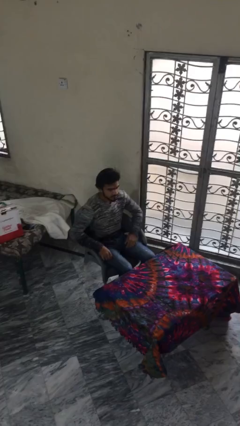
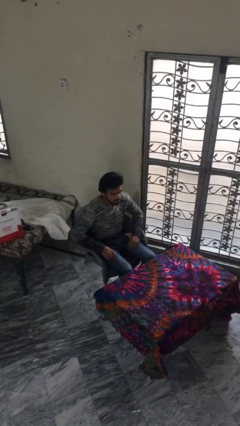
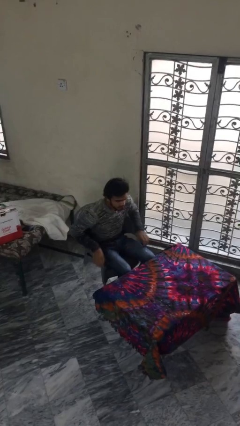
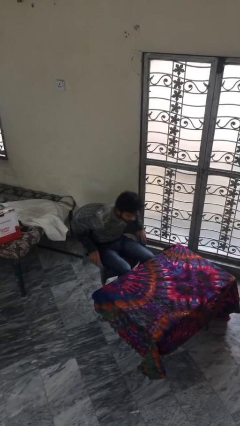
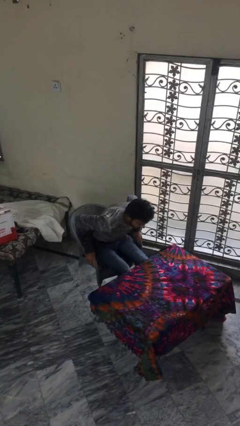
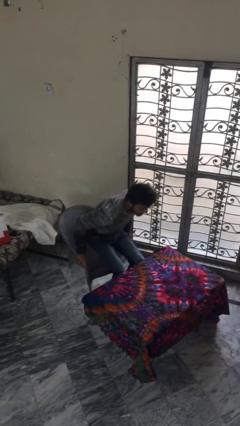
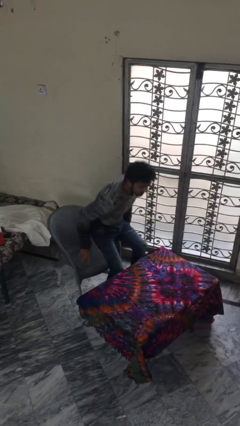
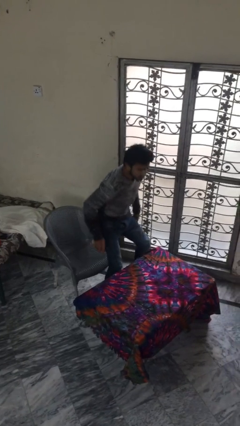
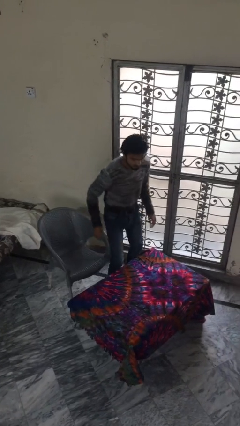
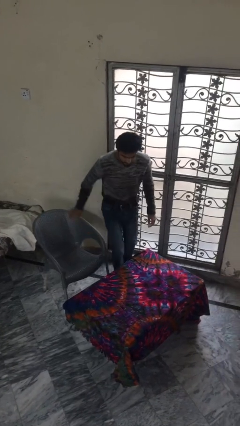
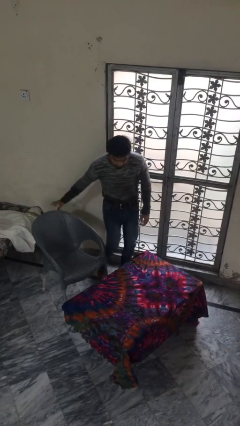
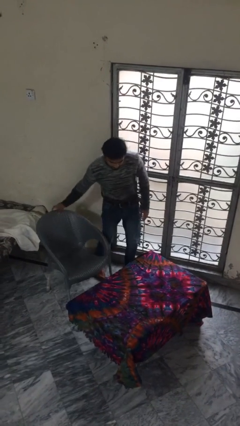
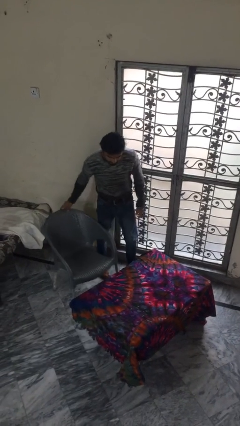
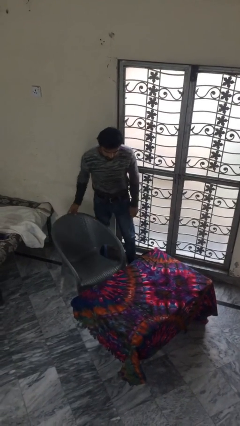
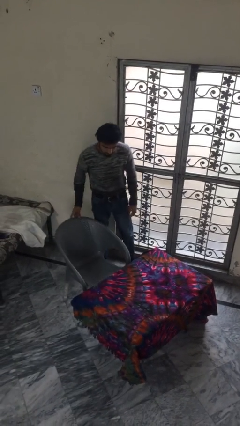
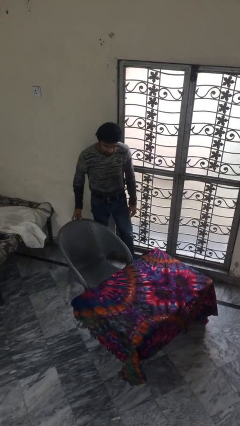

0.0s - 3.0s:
person stands up

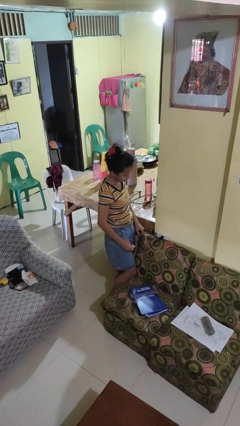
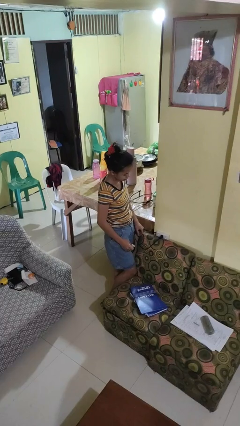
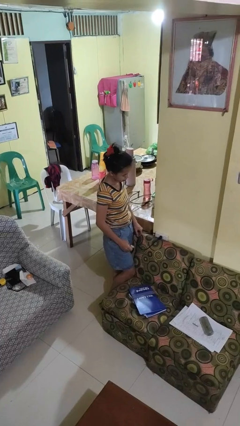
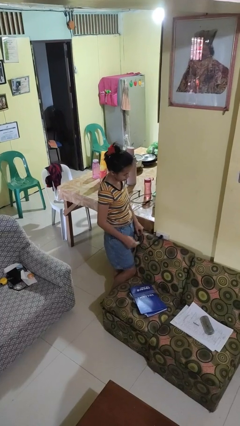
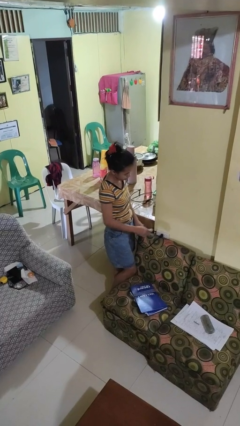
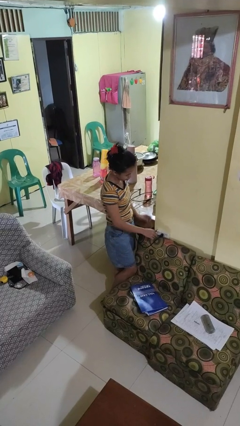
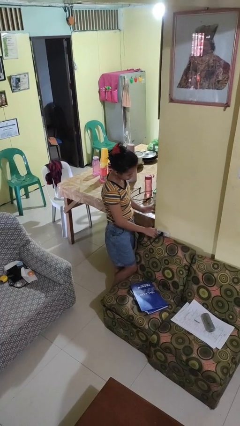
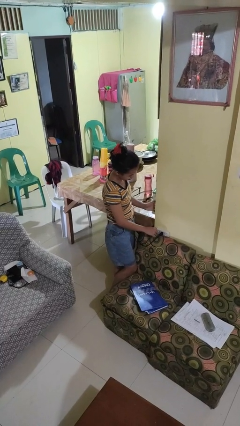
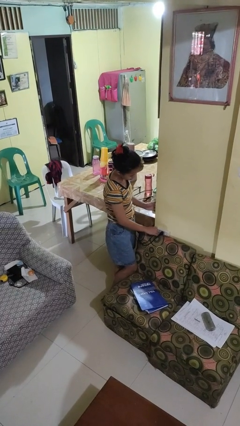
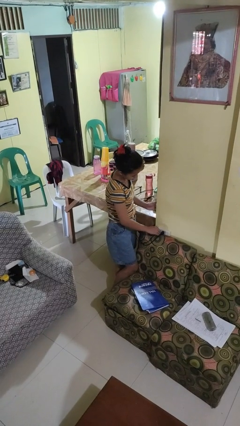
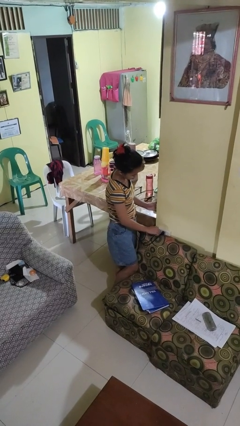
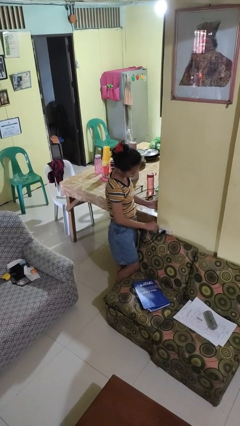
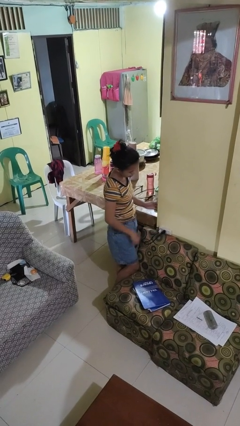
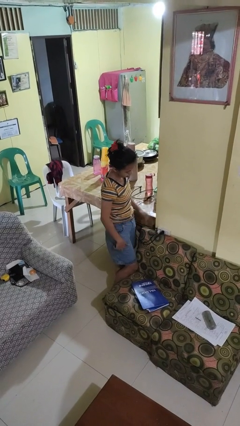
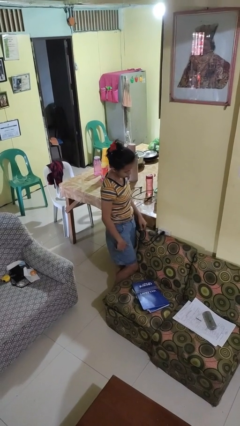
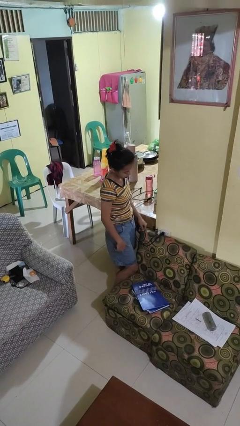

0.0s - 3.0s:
person plugs into electrical socket

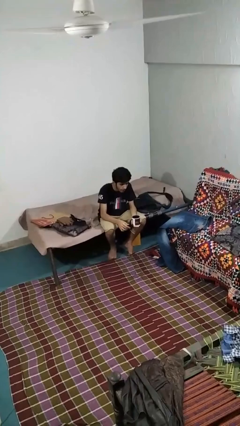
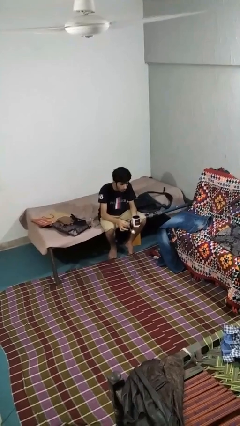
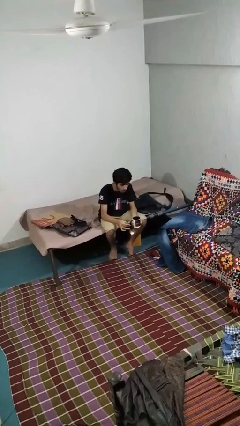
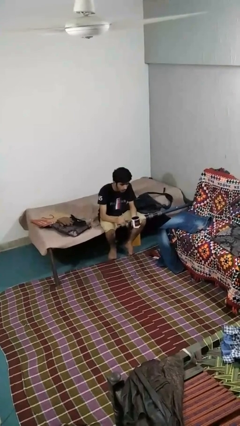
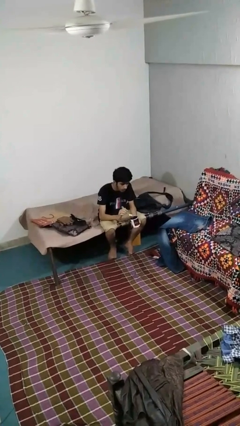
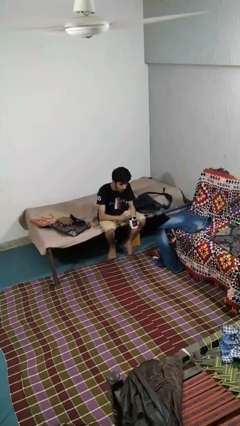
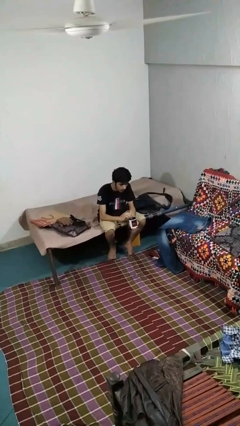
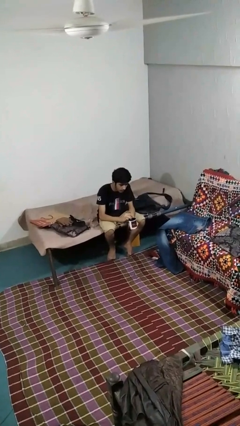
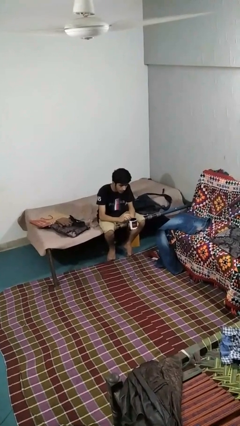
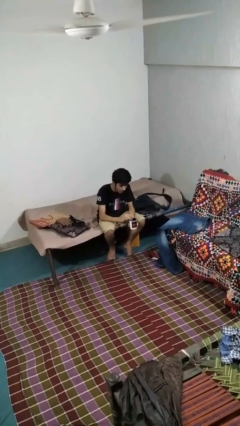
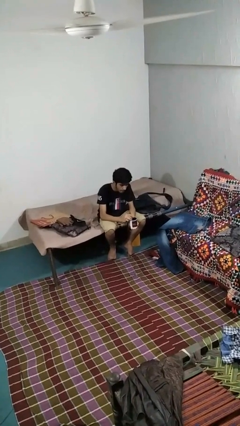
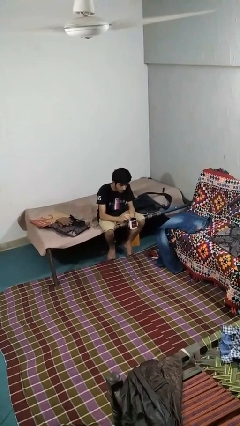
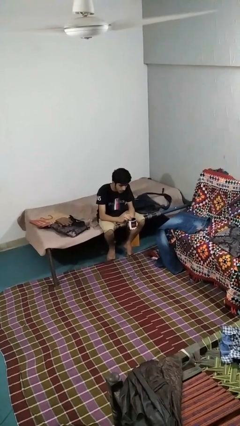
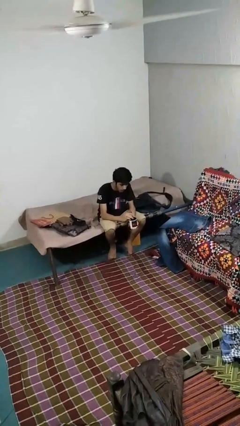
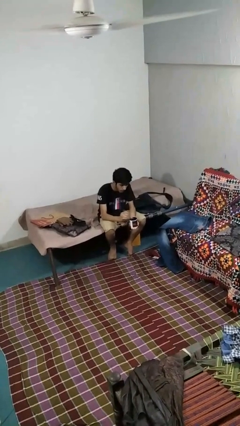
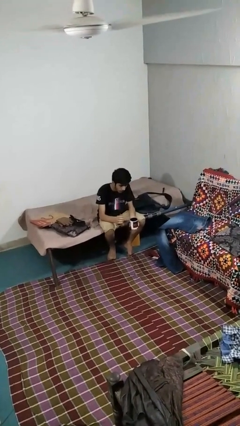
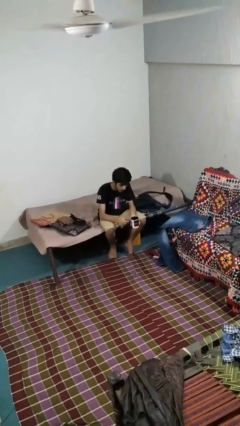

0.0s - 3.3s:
person stirs mug

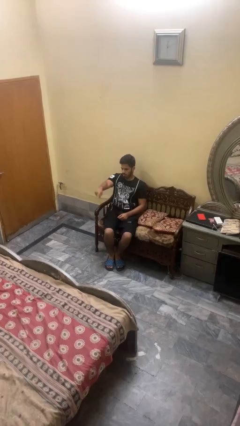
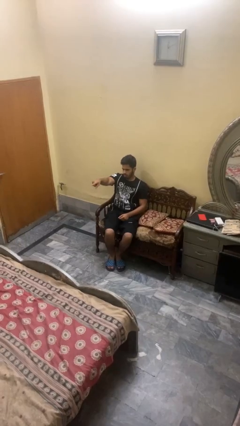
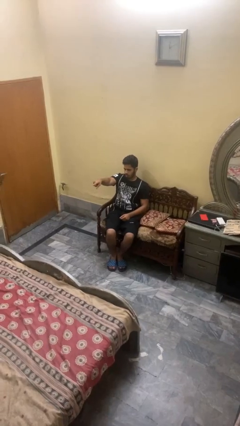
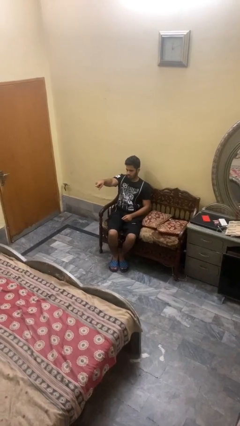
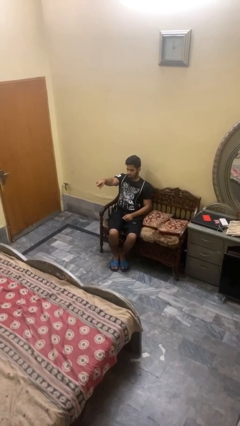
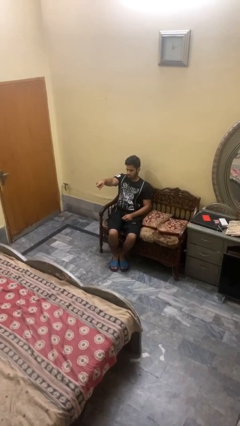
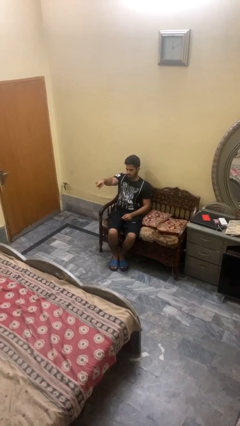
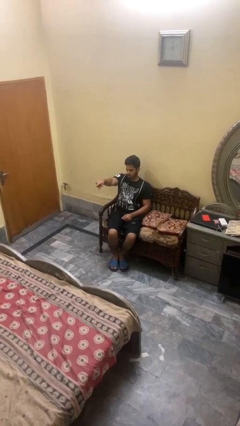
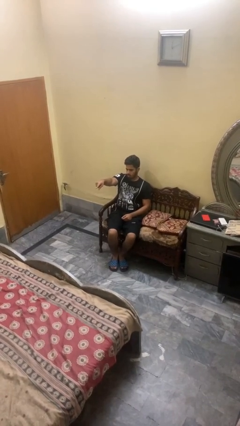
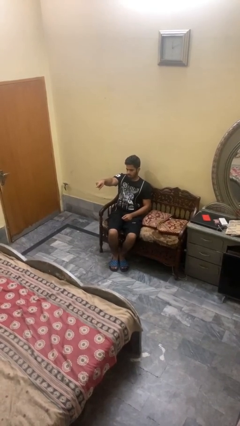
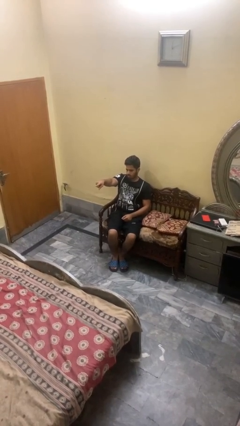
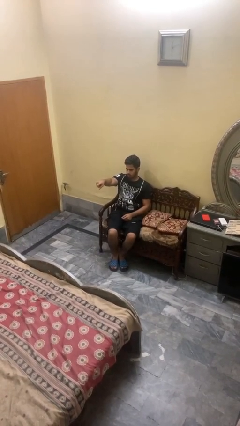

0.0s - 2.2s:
person points at person

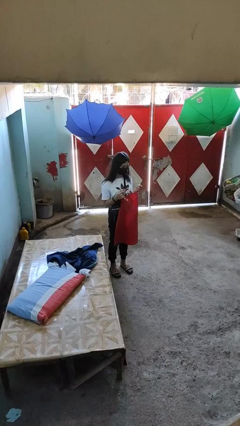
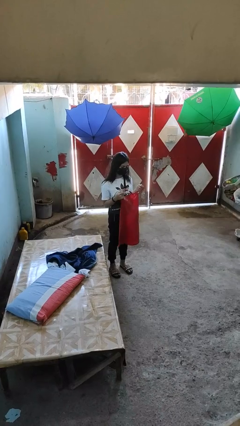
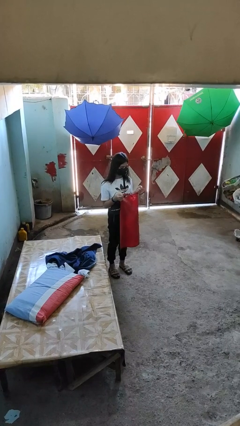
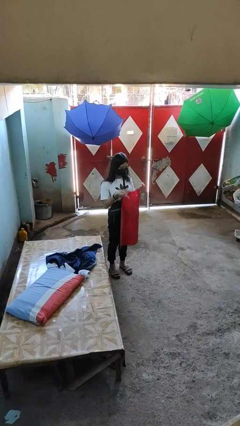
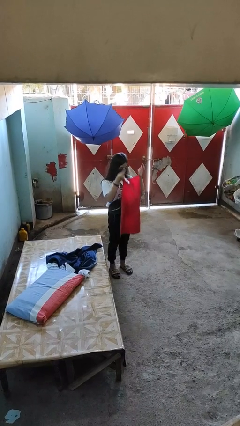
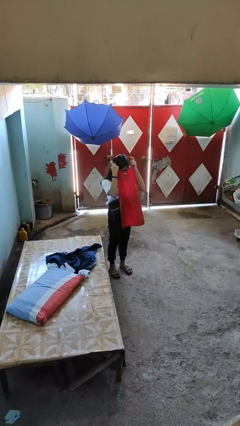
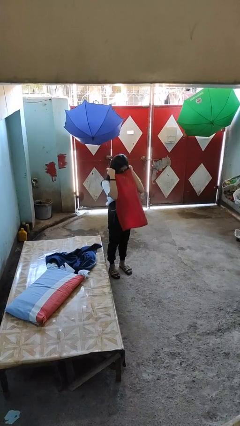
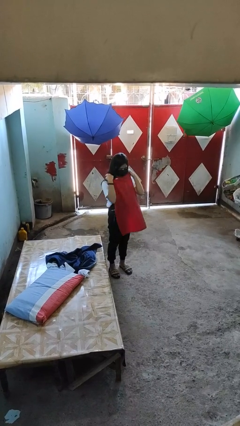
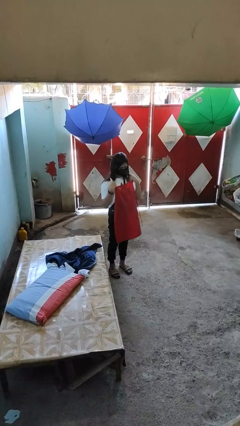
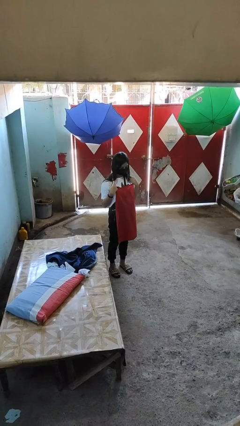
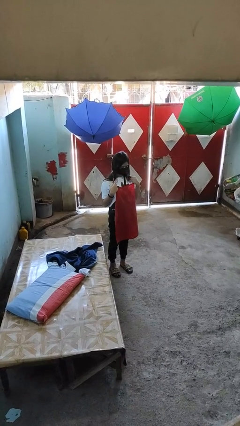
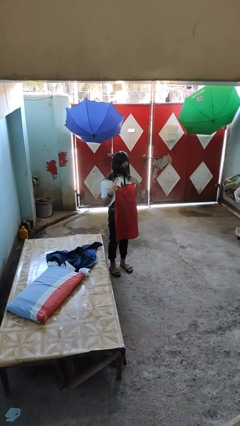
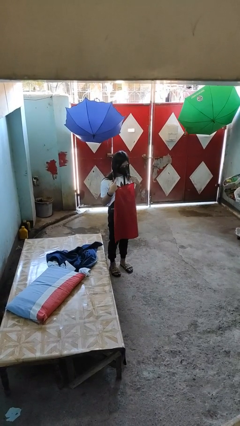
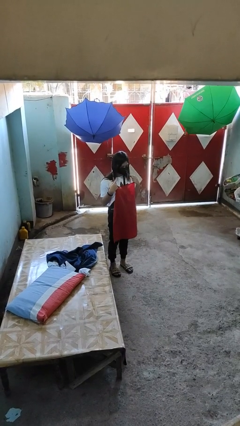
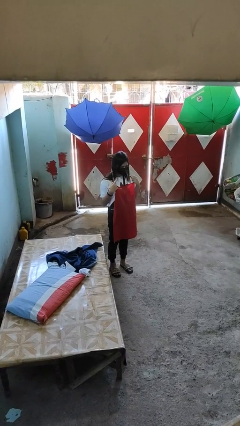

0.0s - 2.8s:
person puts on apron

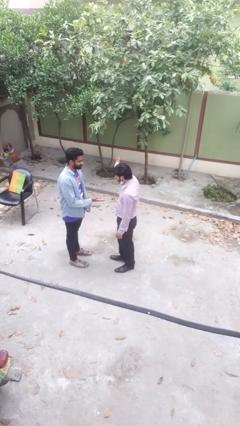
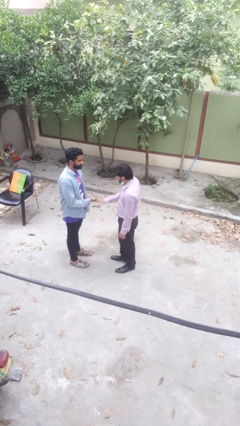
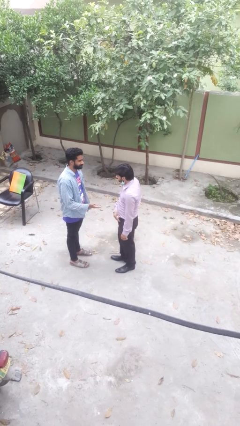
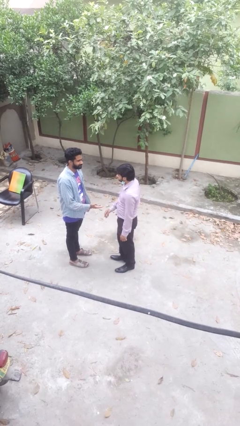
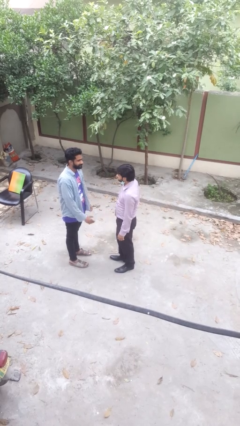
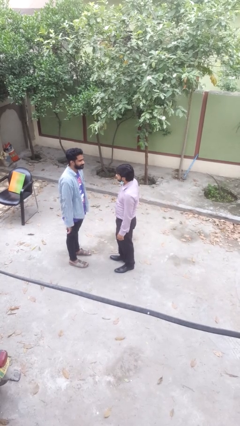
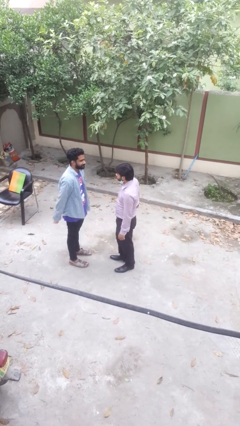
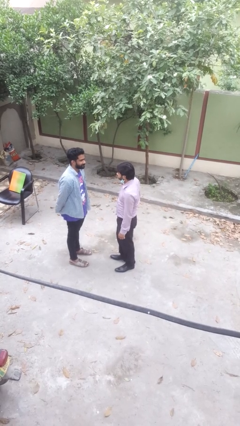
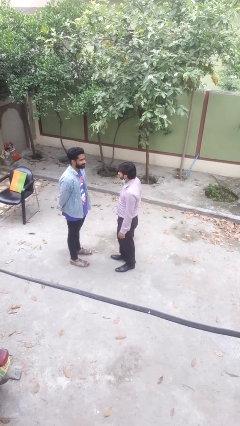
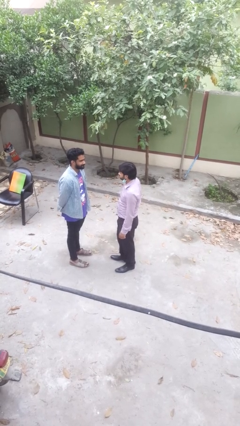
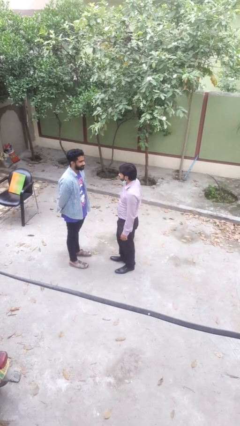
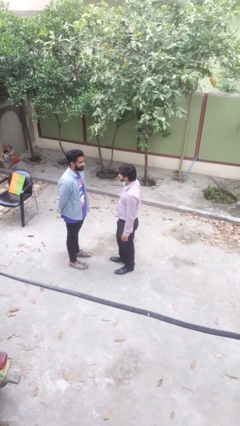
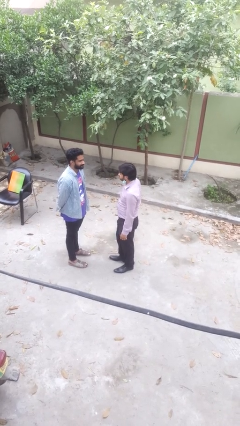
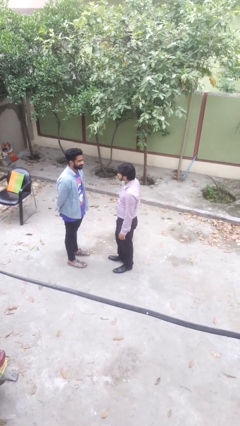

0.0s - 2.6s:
person highfives hand

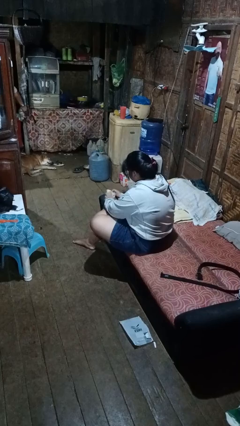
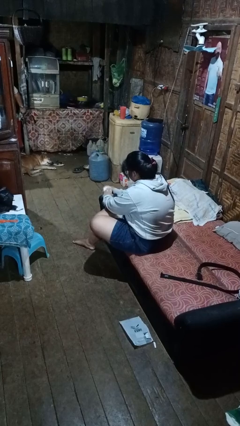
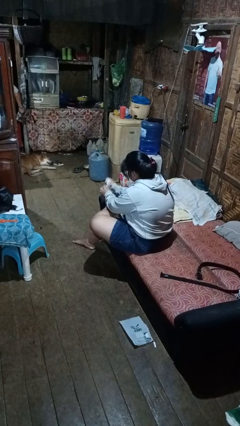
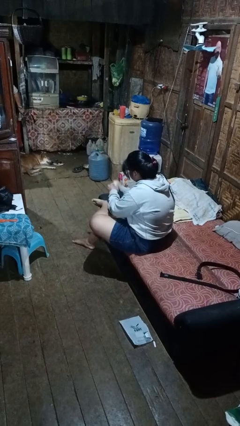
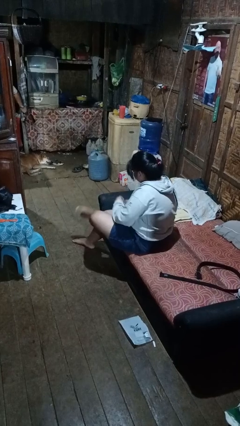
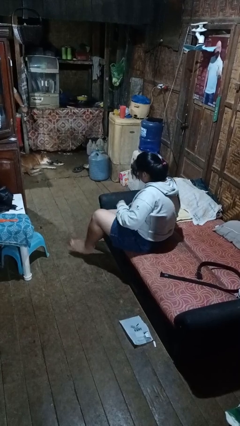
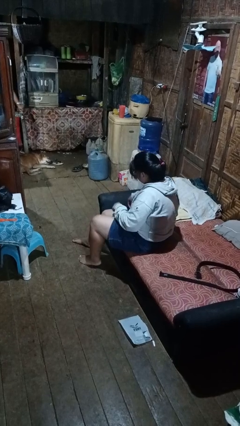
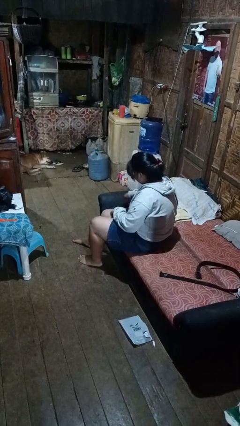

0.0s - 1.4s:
person takes off socks
